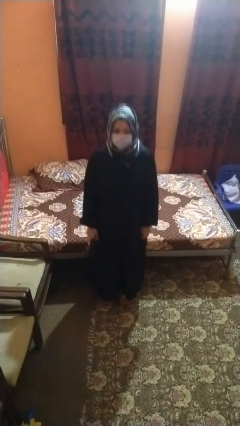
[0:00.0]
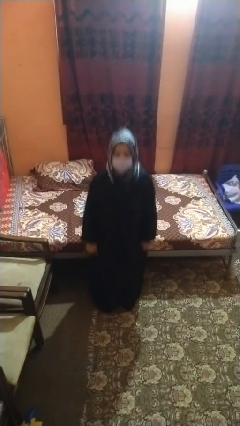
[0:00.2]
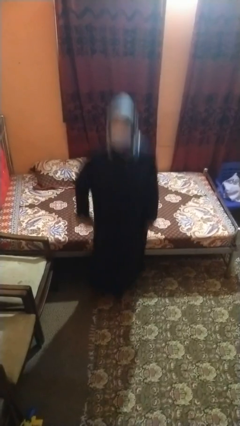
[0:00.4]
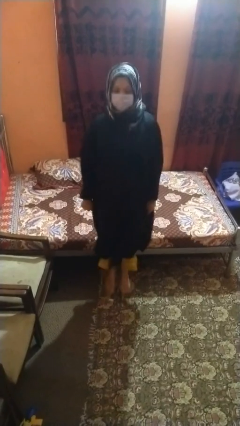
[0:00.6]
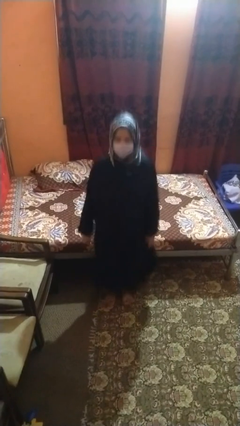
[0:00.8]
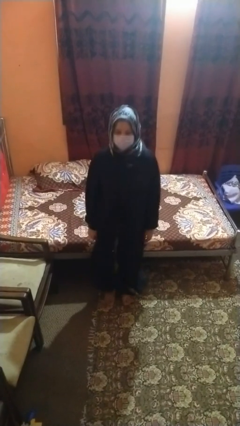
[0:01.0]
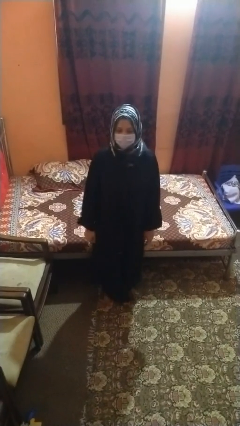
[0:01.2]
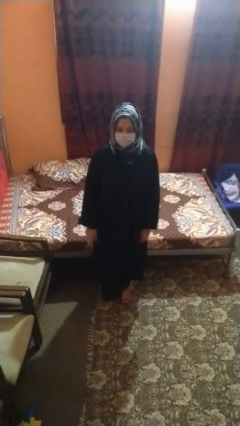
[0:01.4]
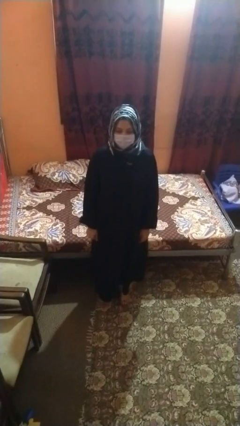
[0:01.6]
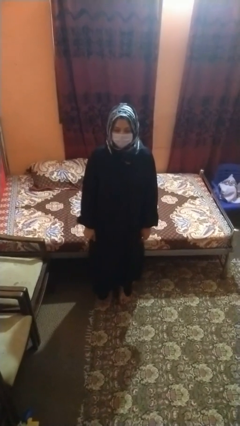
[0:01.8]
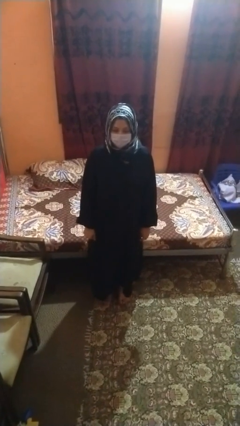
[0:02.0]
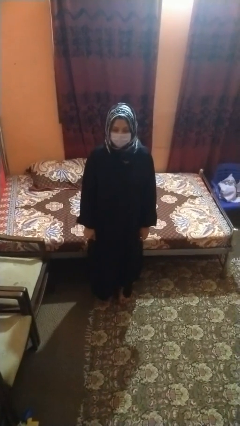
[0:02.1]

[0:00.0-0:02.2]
person jumps

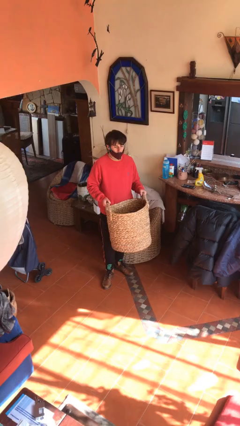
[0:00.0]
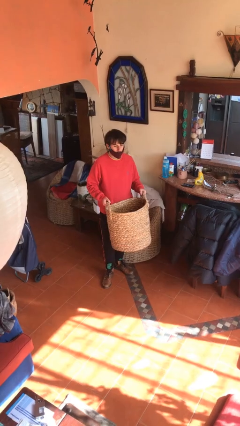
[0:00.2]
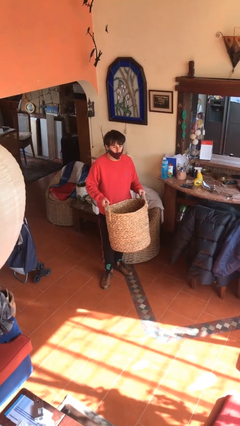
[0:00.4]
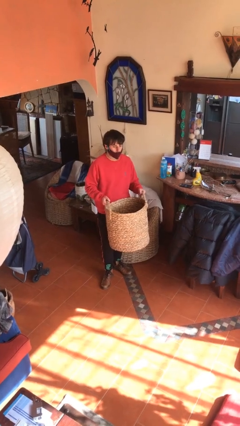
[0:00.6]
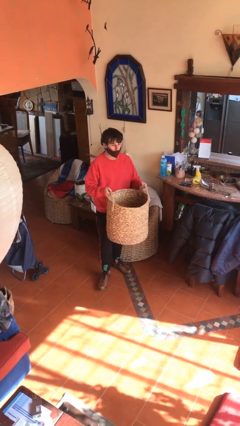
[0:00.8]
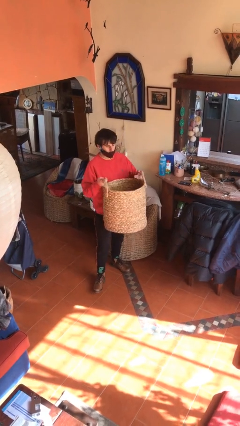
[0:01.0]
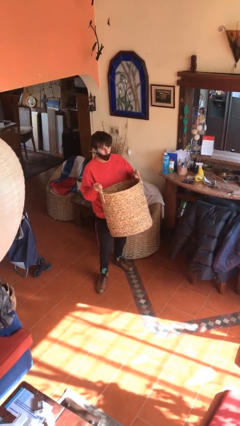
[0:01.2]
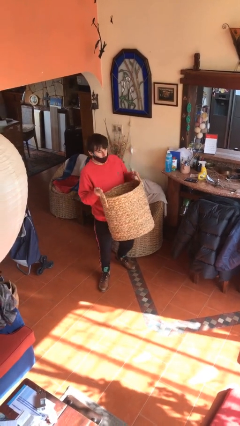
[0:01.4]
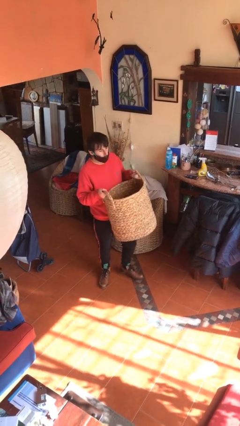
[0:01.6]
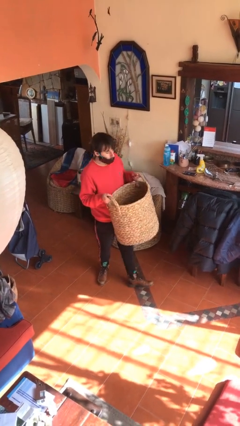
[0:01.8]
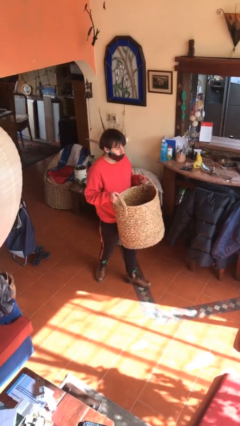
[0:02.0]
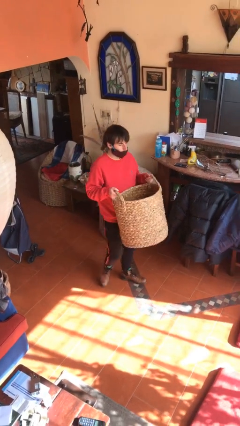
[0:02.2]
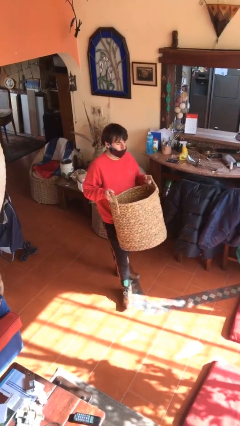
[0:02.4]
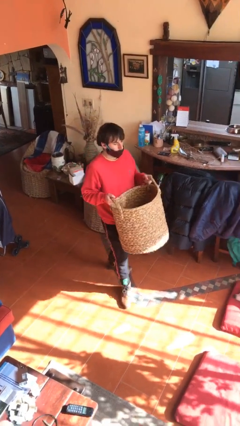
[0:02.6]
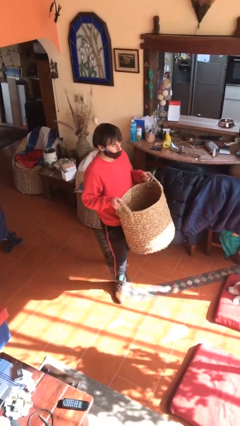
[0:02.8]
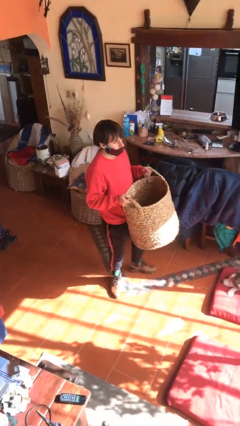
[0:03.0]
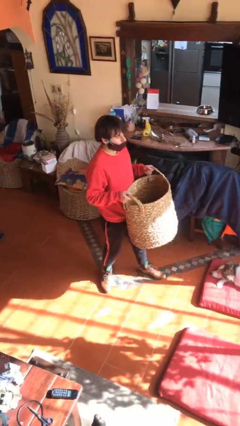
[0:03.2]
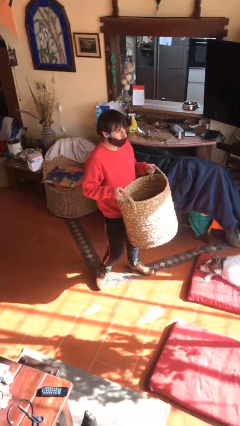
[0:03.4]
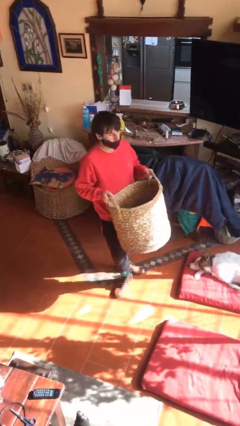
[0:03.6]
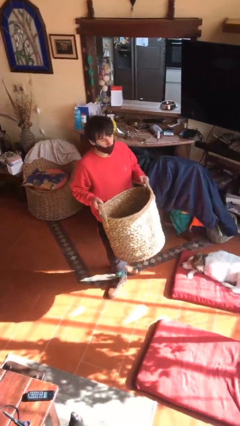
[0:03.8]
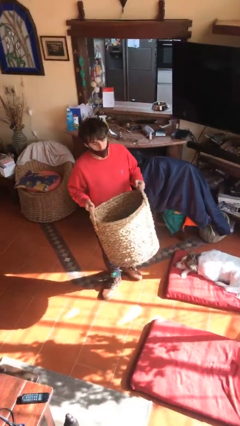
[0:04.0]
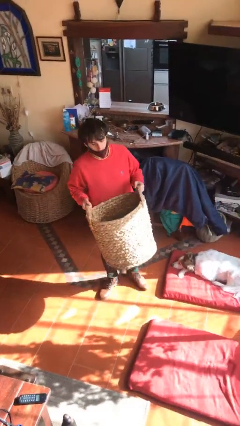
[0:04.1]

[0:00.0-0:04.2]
person carries laundry basket

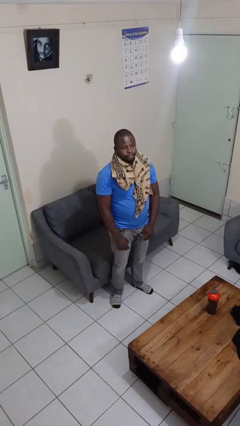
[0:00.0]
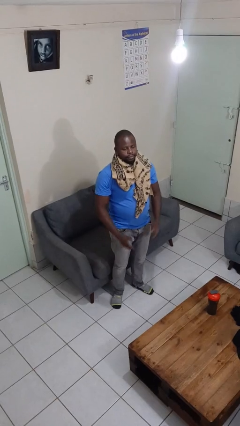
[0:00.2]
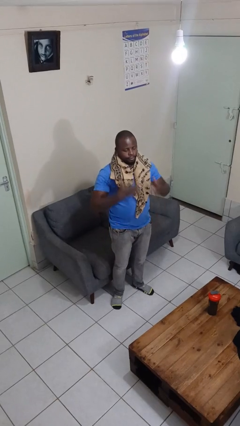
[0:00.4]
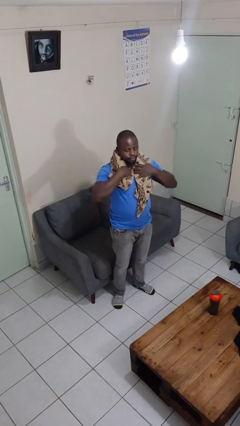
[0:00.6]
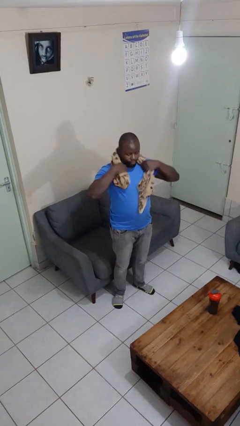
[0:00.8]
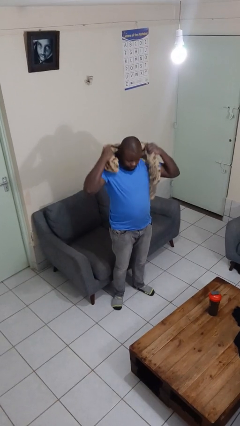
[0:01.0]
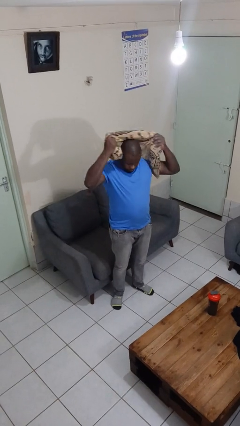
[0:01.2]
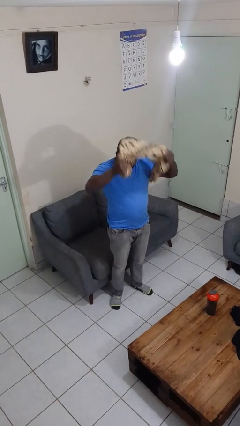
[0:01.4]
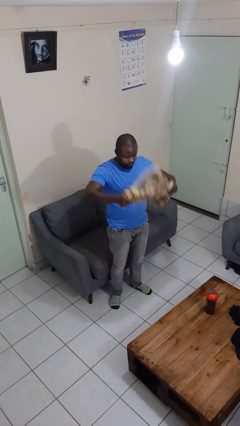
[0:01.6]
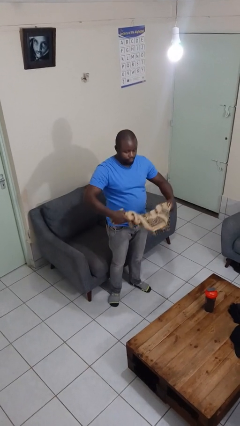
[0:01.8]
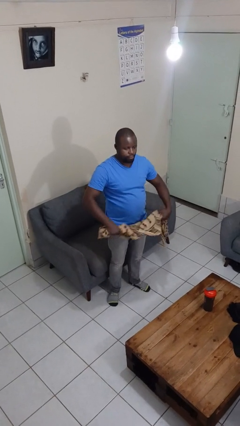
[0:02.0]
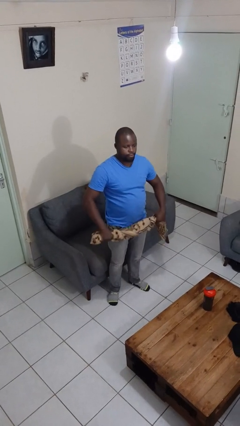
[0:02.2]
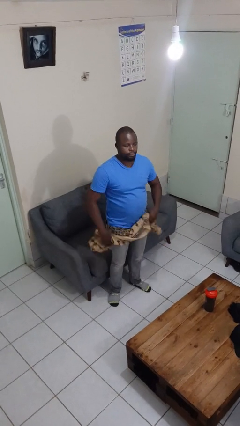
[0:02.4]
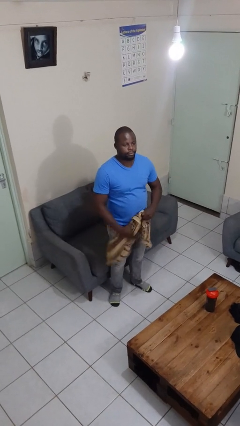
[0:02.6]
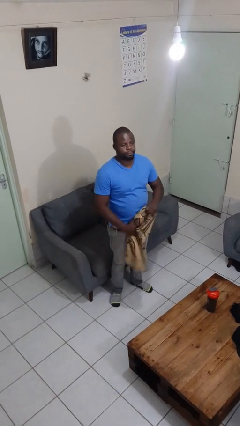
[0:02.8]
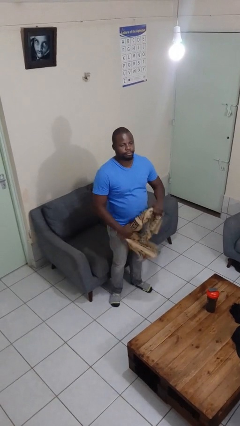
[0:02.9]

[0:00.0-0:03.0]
person takes off scarf

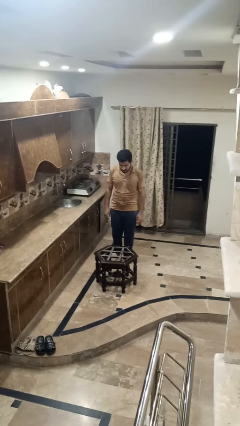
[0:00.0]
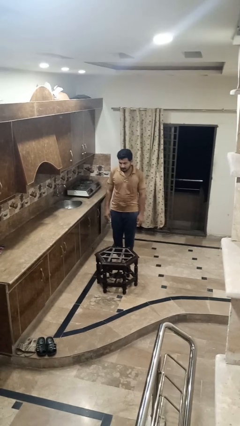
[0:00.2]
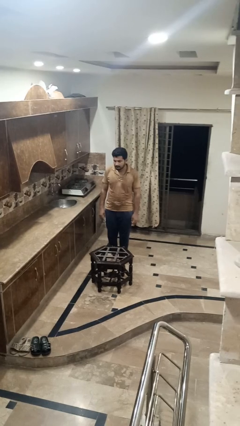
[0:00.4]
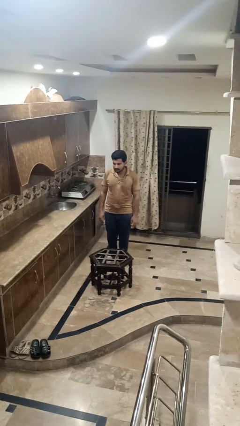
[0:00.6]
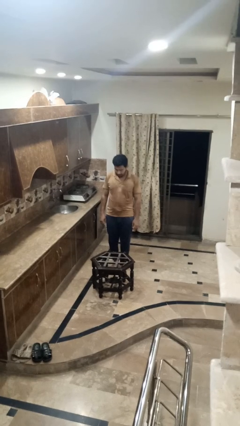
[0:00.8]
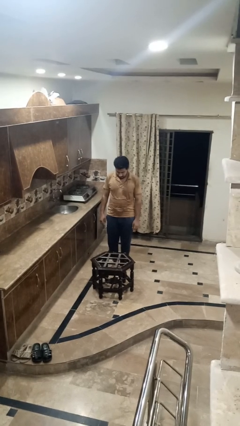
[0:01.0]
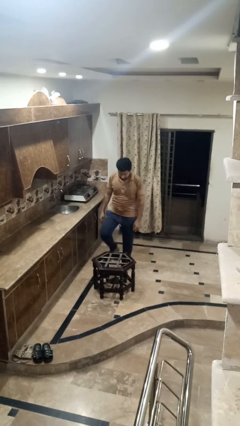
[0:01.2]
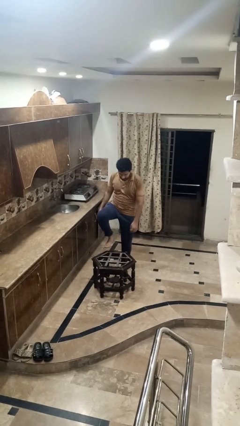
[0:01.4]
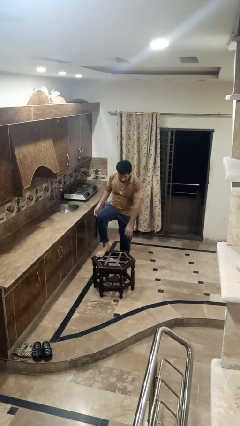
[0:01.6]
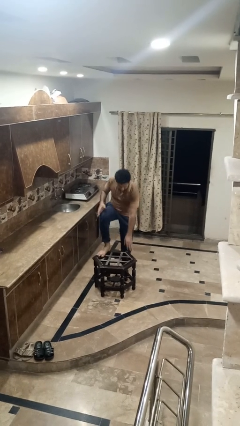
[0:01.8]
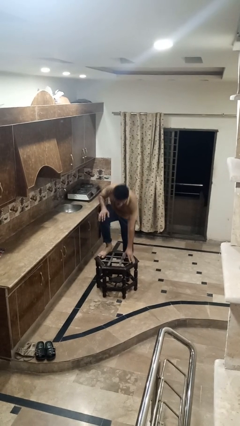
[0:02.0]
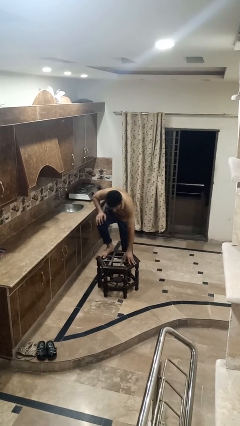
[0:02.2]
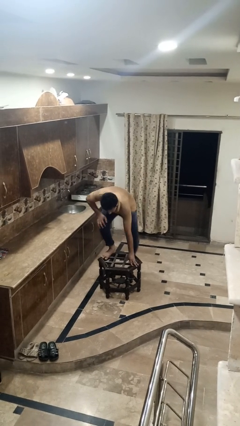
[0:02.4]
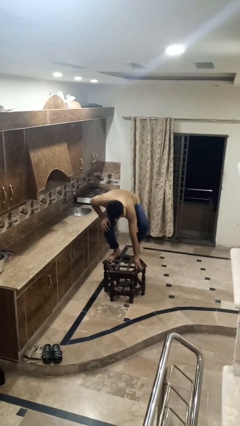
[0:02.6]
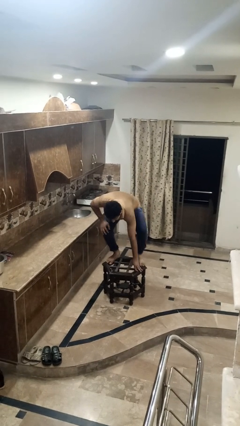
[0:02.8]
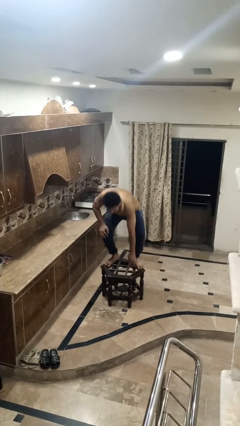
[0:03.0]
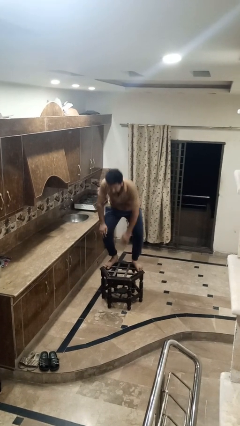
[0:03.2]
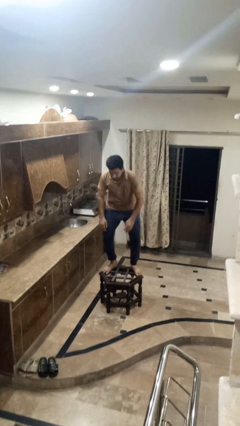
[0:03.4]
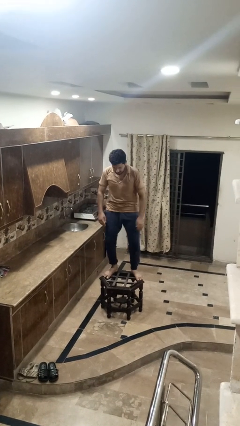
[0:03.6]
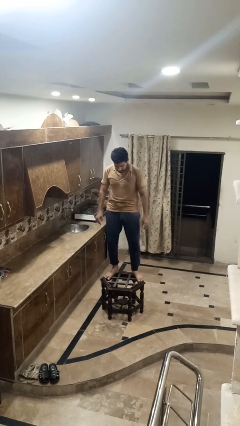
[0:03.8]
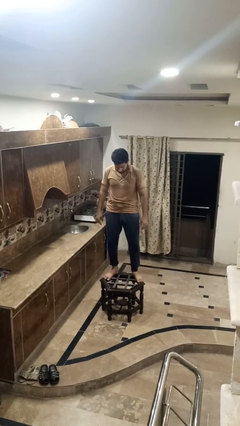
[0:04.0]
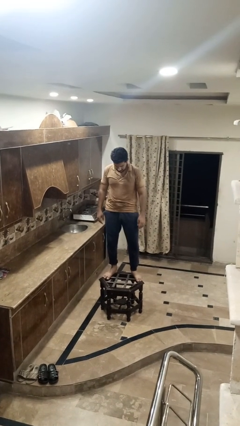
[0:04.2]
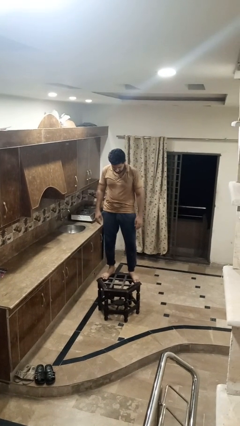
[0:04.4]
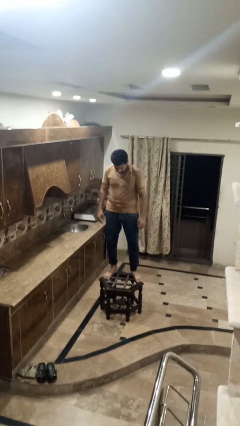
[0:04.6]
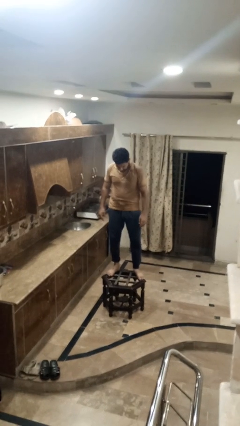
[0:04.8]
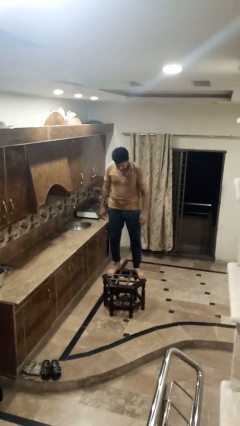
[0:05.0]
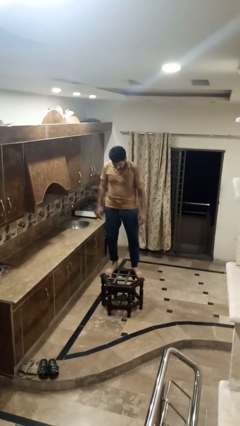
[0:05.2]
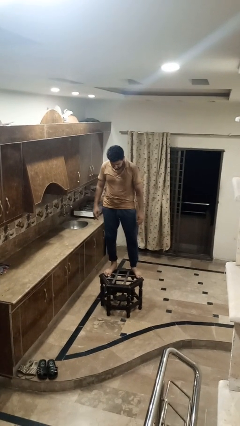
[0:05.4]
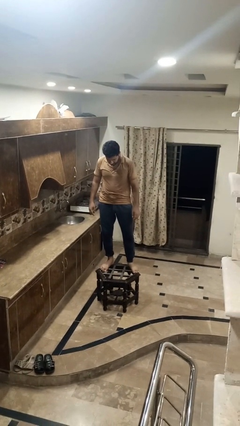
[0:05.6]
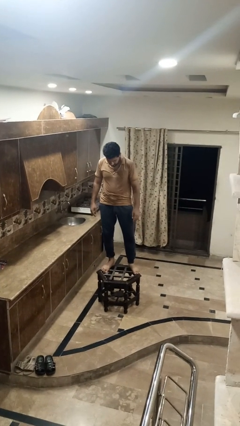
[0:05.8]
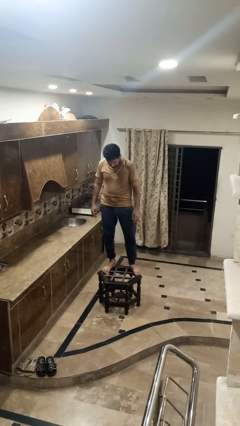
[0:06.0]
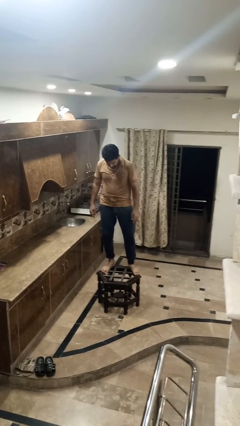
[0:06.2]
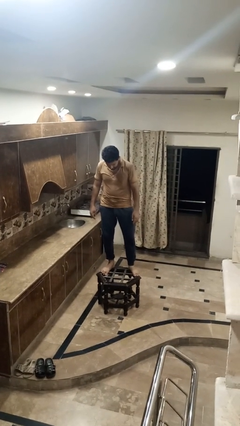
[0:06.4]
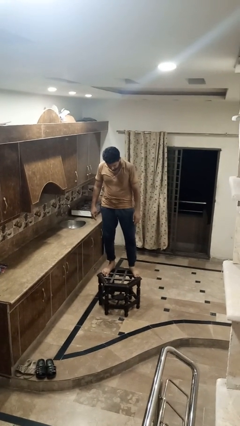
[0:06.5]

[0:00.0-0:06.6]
person climbs on table

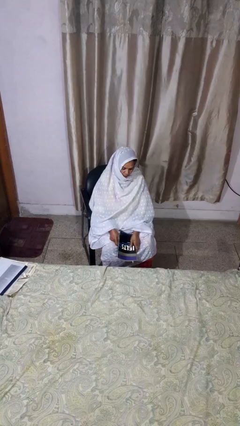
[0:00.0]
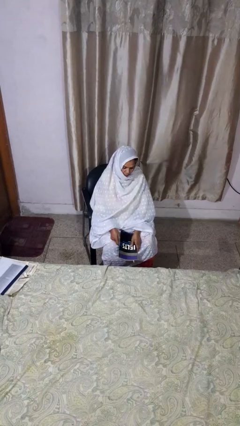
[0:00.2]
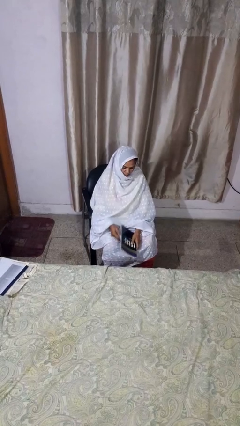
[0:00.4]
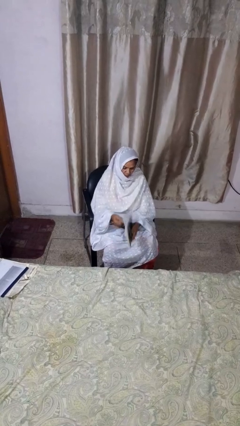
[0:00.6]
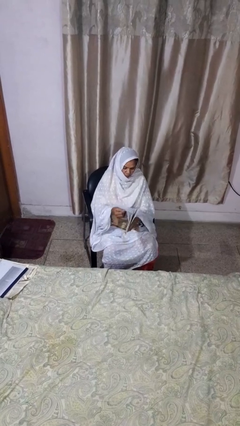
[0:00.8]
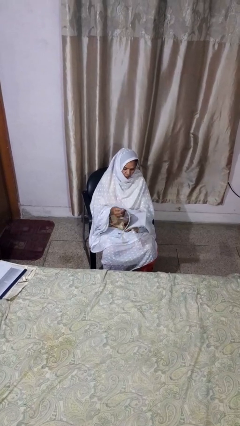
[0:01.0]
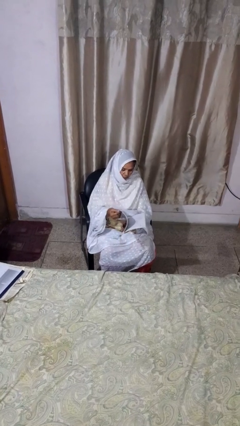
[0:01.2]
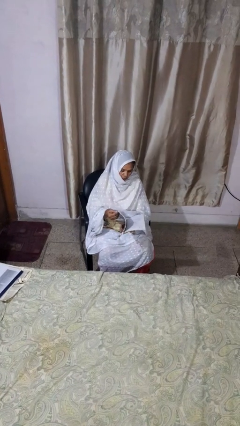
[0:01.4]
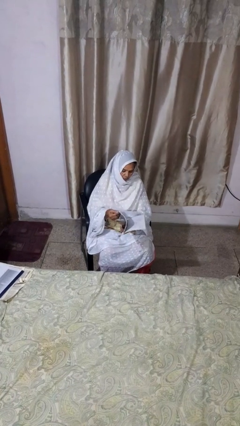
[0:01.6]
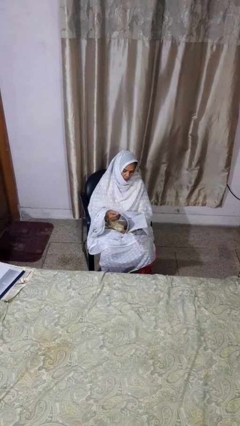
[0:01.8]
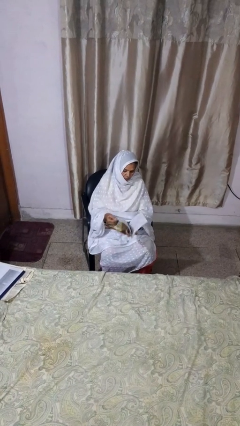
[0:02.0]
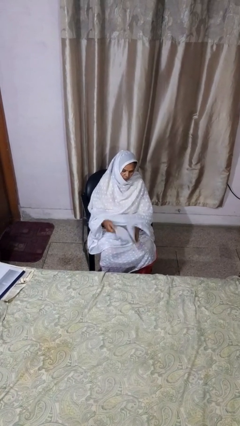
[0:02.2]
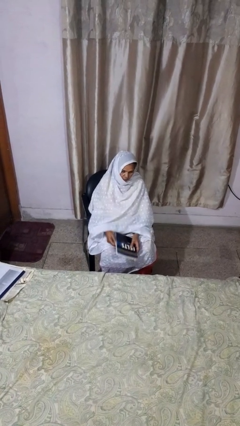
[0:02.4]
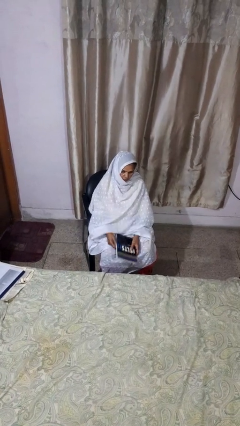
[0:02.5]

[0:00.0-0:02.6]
person reads book
